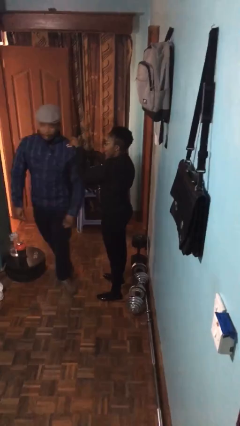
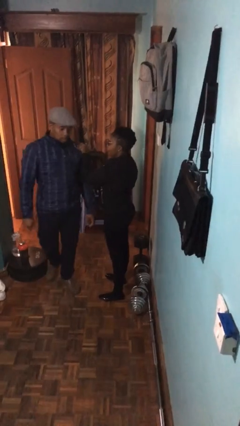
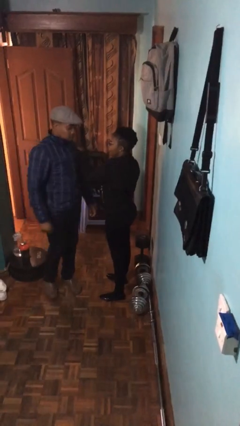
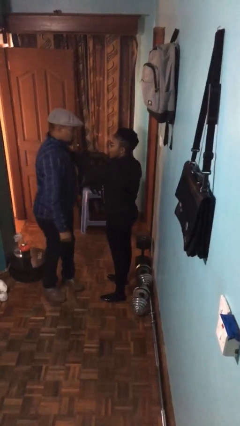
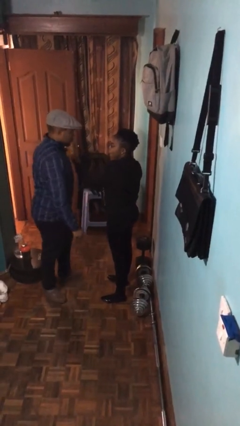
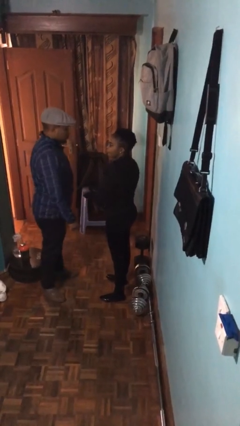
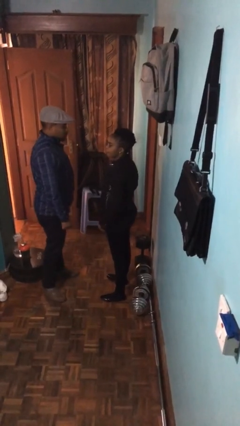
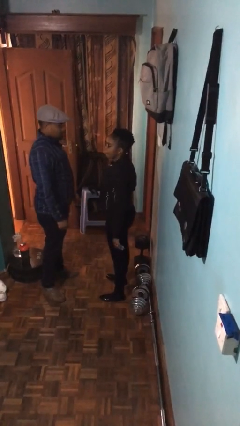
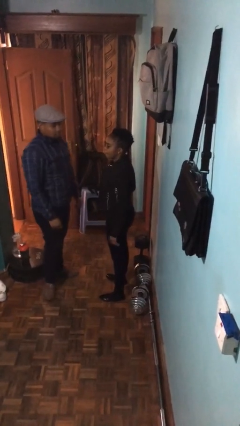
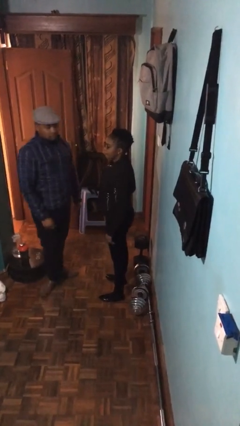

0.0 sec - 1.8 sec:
person spins person around

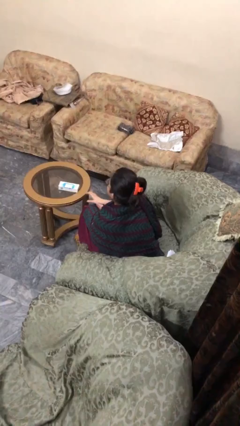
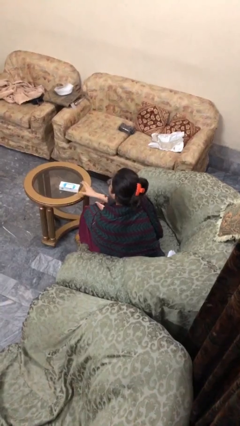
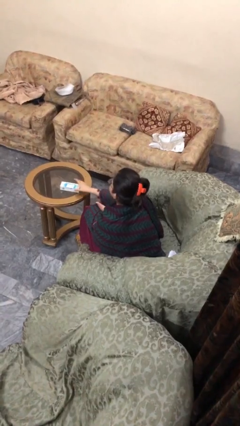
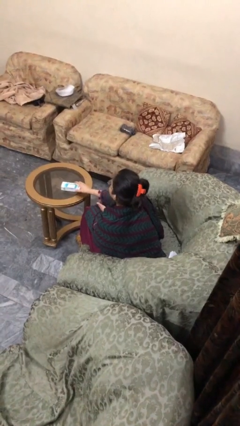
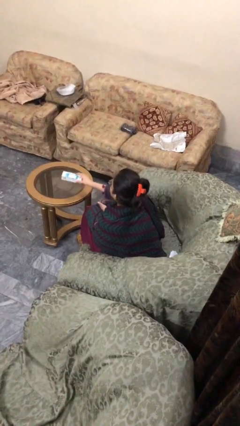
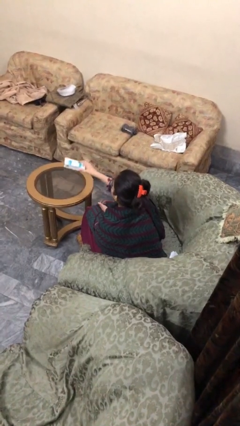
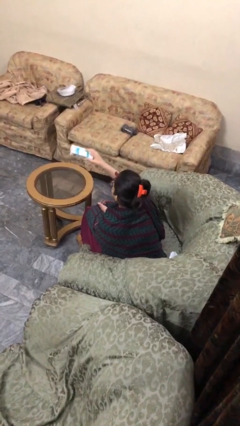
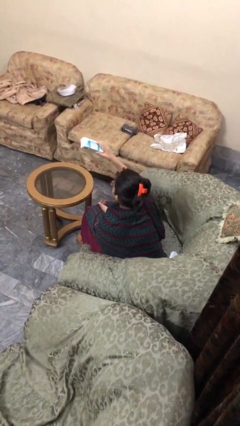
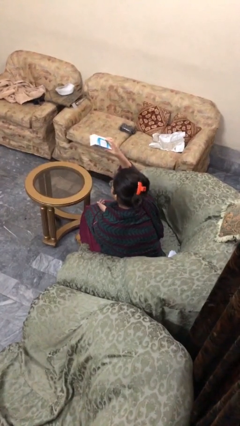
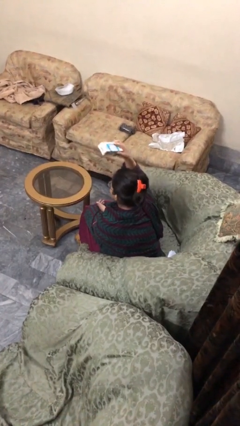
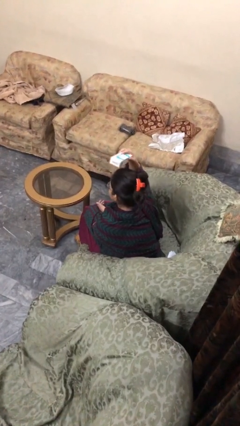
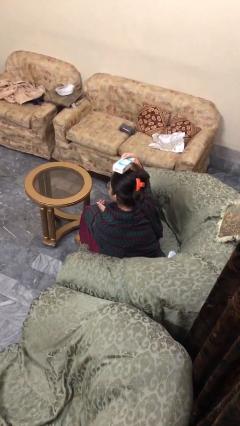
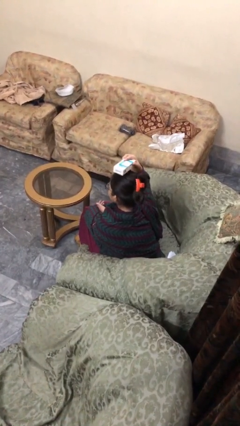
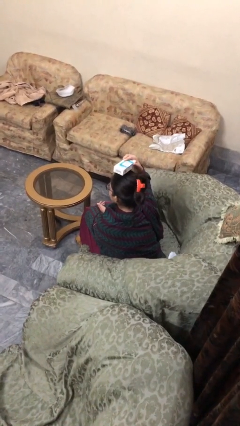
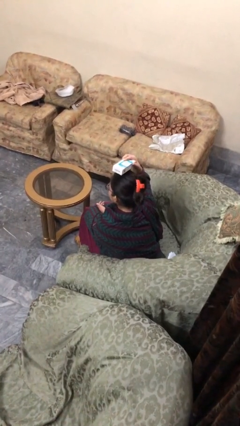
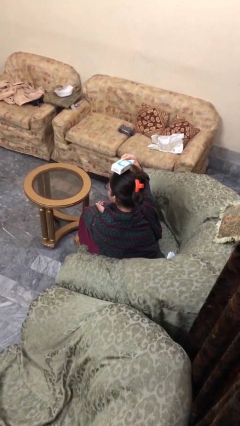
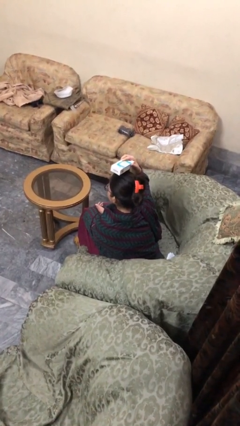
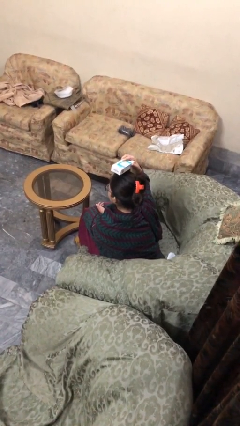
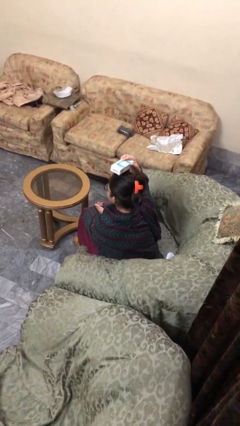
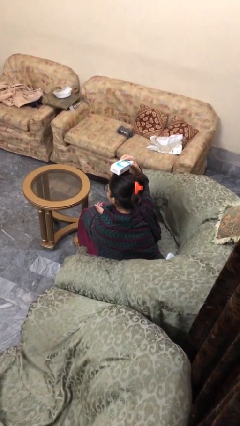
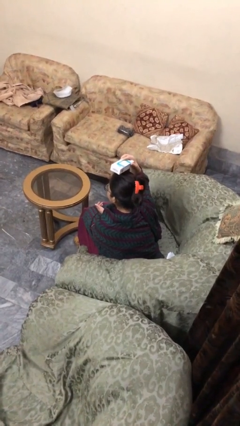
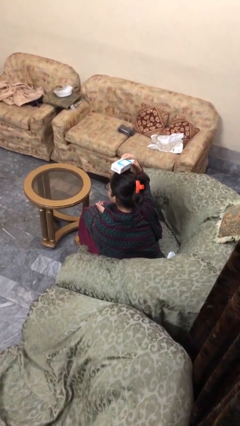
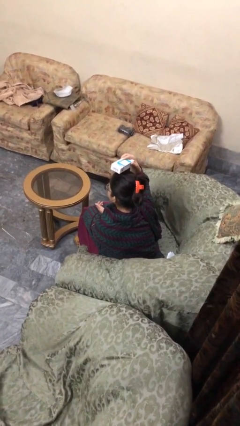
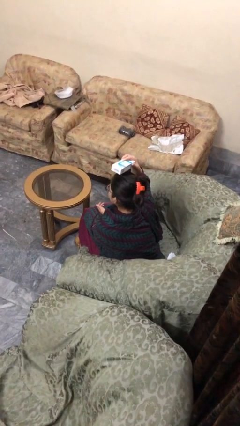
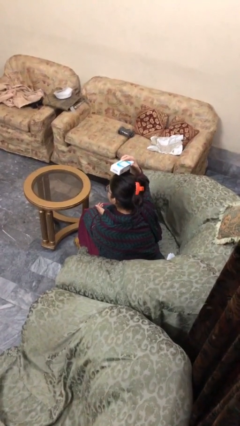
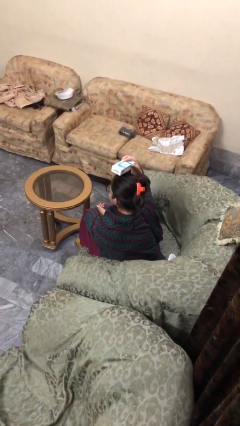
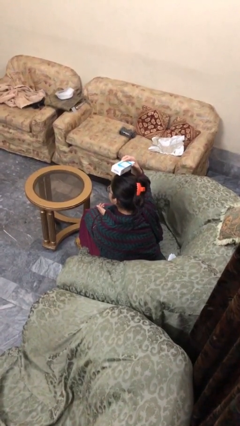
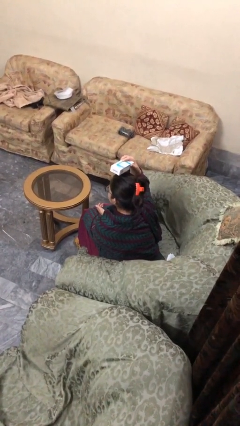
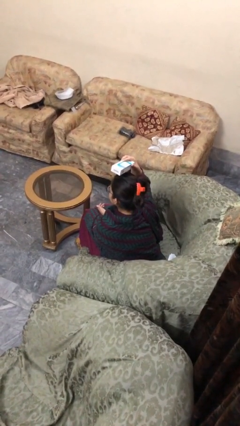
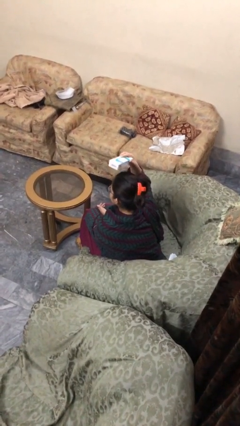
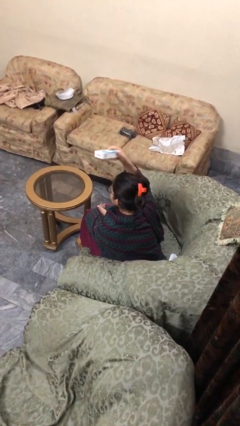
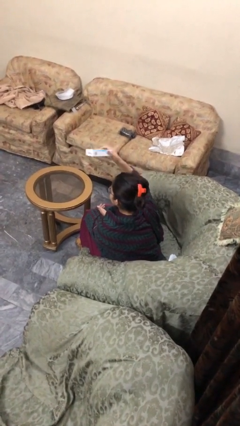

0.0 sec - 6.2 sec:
person holds object above head

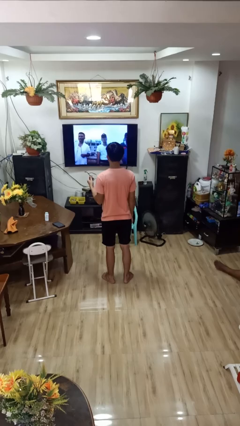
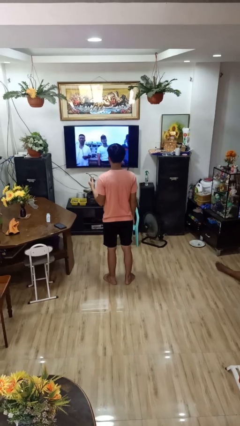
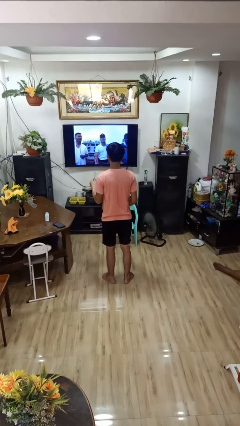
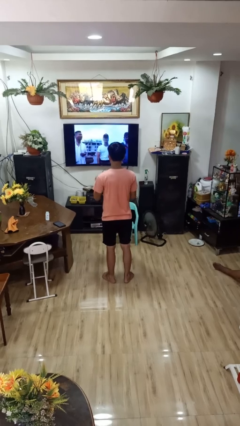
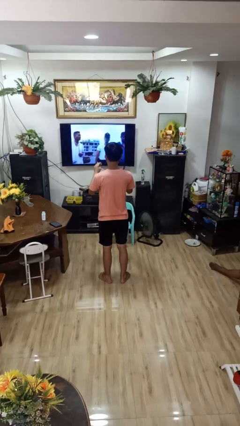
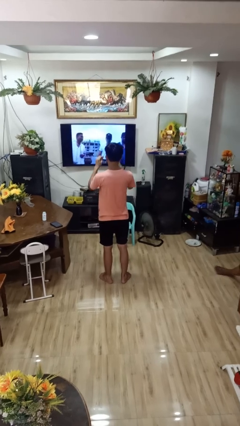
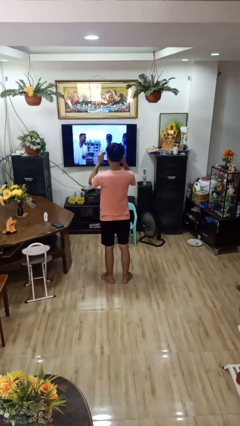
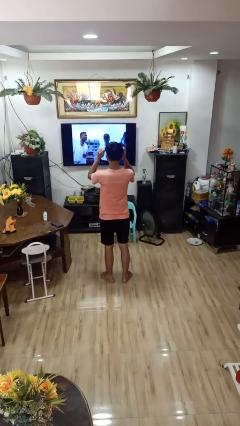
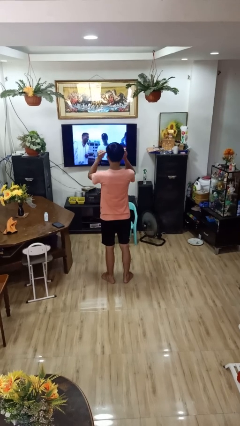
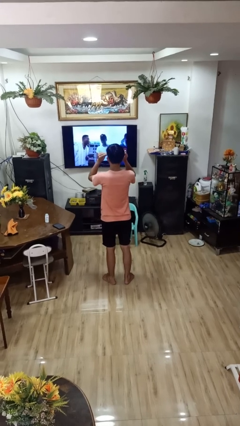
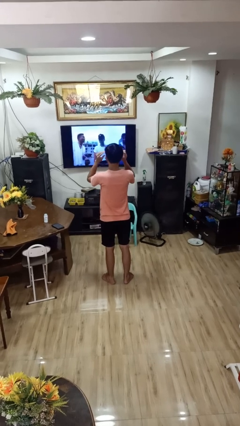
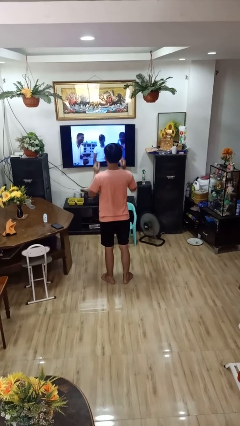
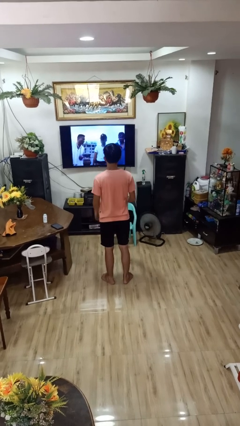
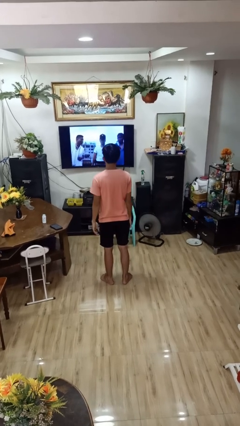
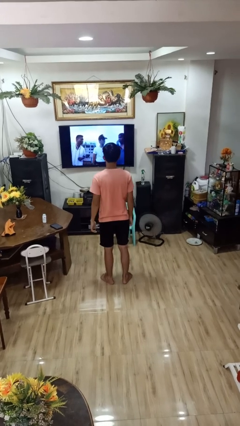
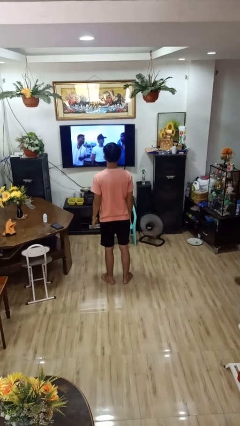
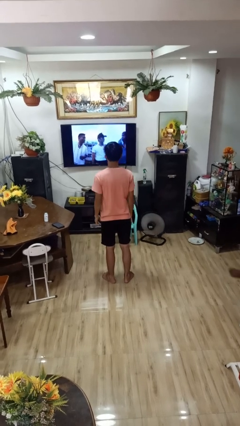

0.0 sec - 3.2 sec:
person puts on glasses

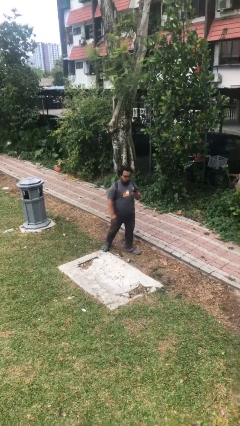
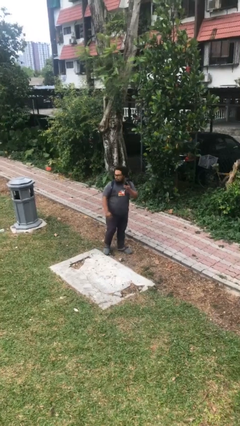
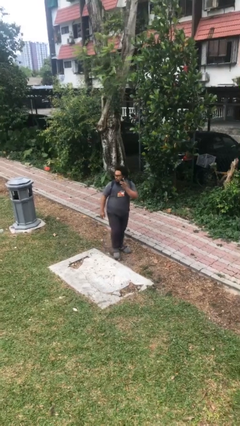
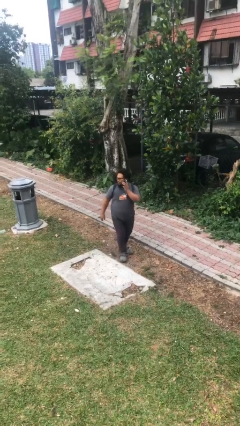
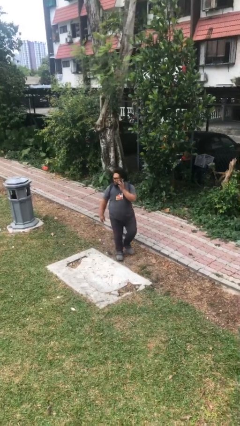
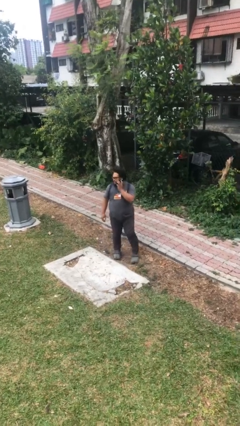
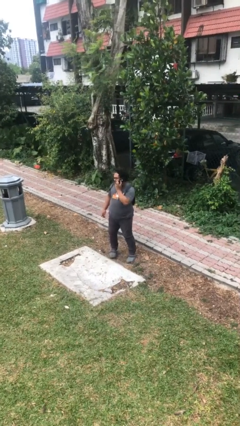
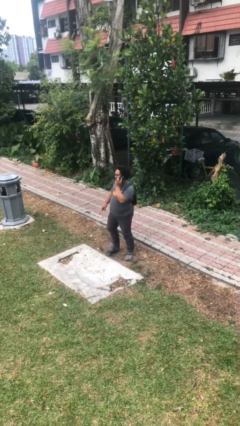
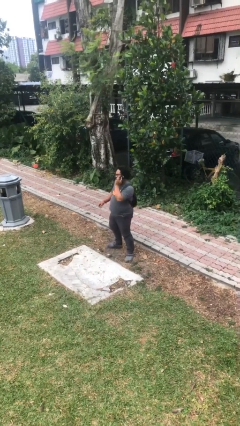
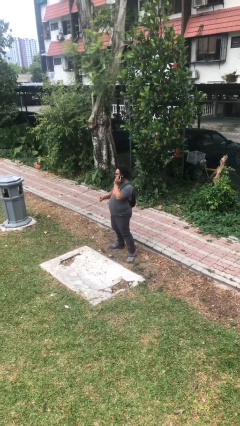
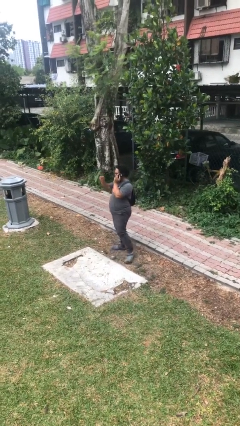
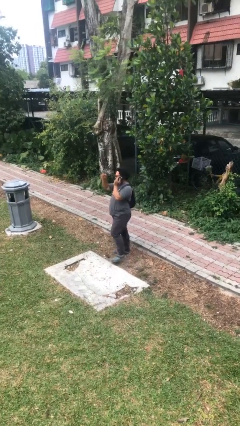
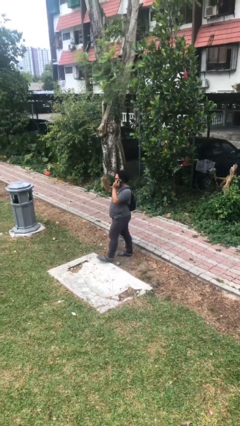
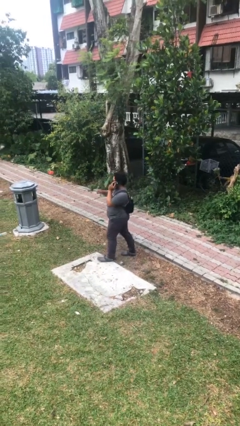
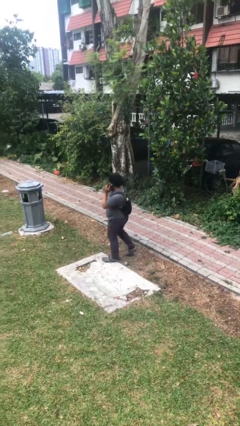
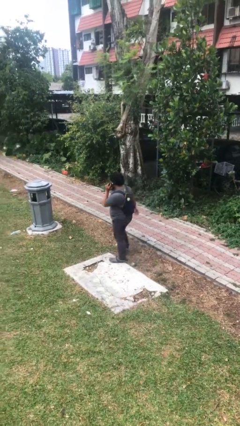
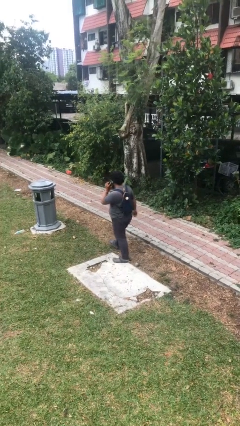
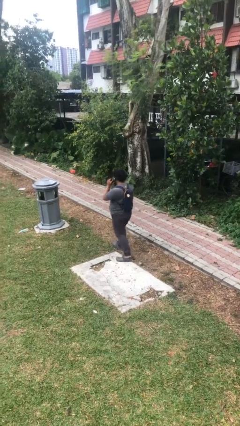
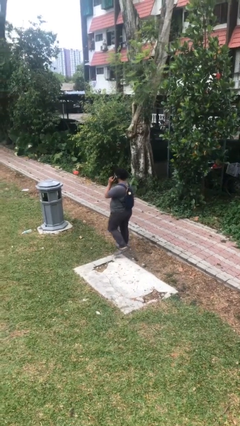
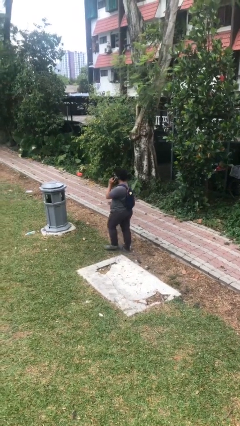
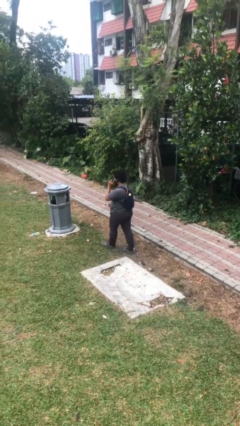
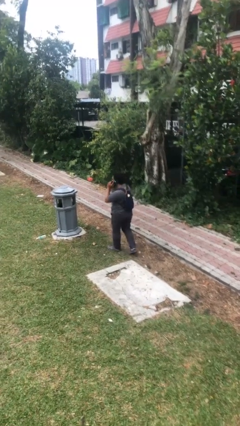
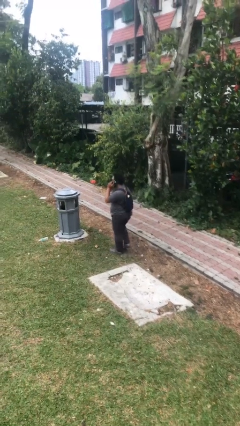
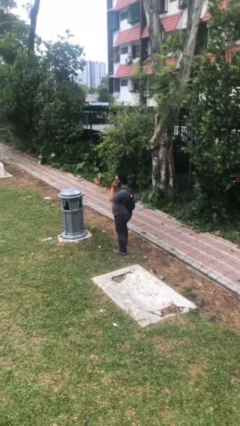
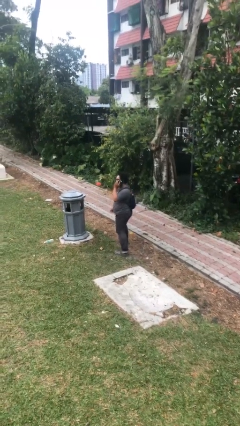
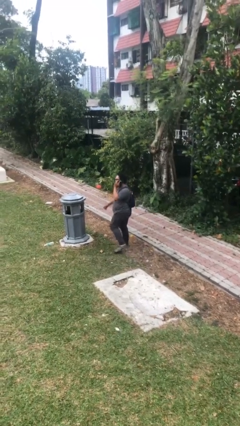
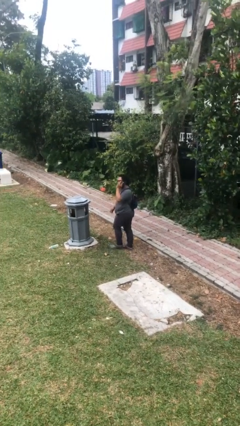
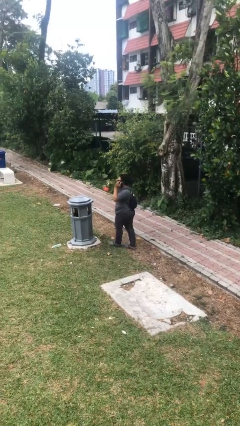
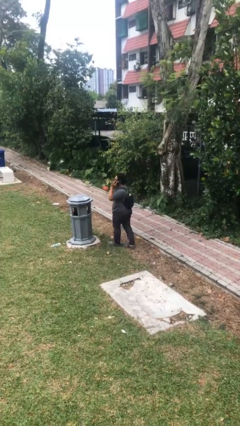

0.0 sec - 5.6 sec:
person talks on phone

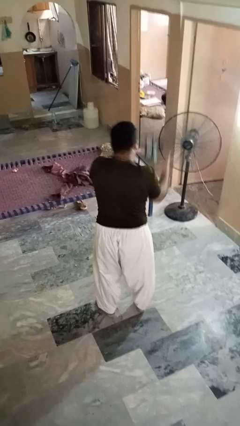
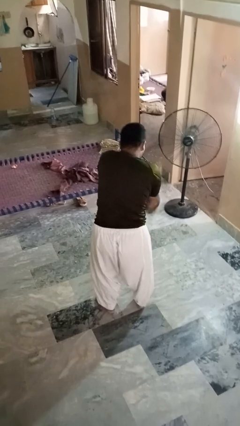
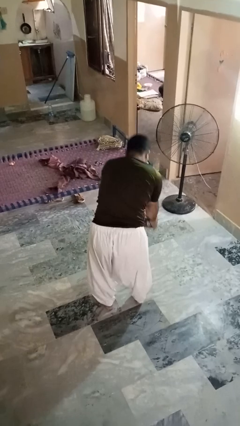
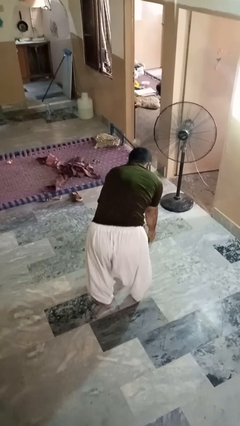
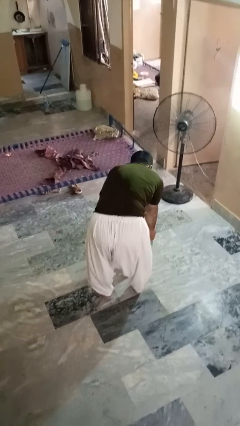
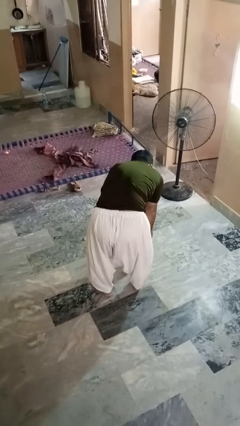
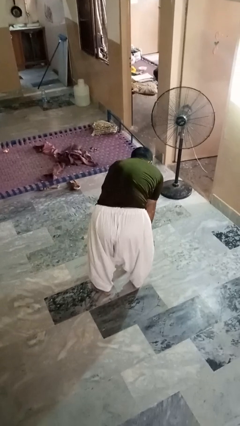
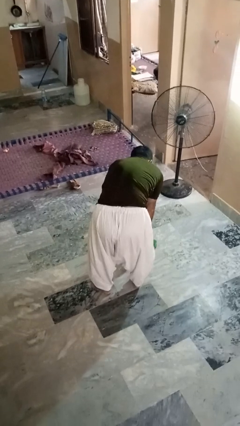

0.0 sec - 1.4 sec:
person catches dropped object
